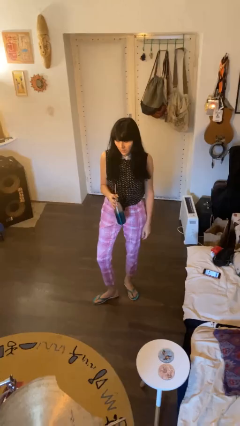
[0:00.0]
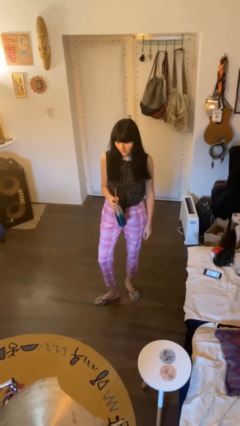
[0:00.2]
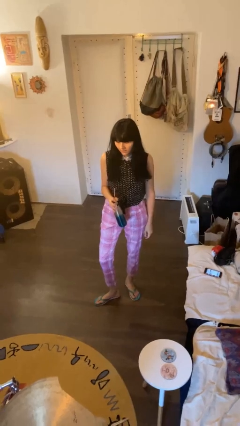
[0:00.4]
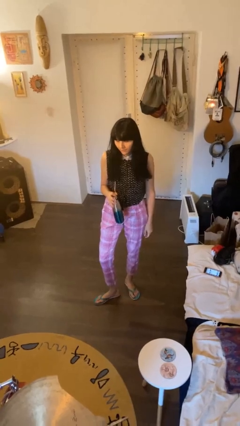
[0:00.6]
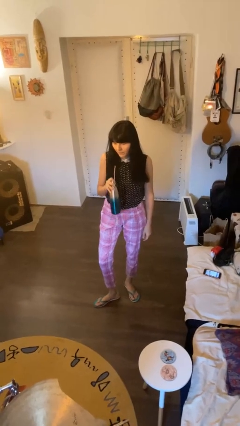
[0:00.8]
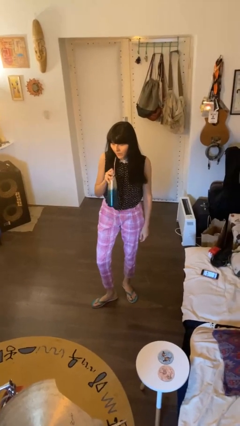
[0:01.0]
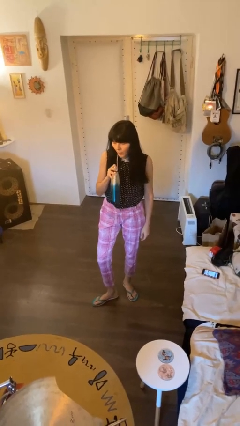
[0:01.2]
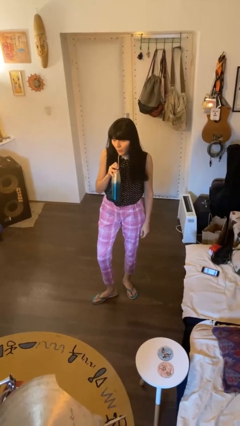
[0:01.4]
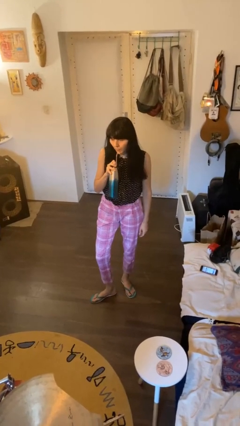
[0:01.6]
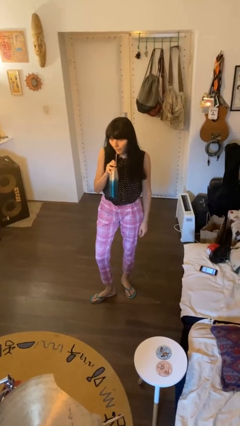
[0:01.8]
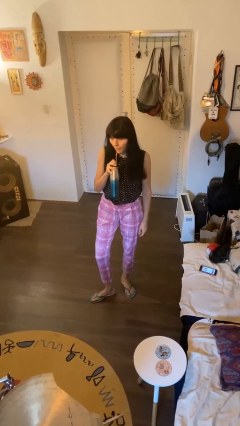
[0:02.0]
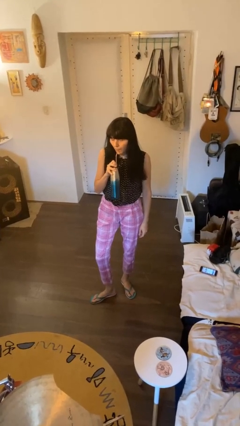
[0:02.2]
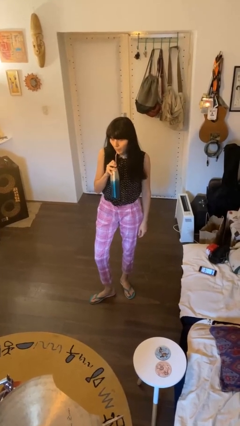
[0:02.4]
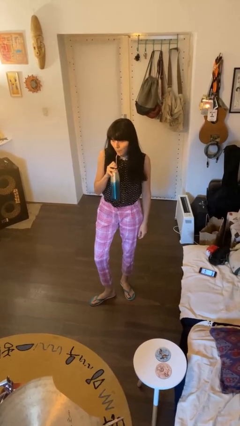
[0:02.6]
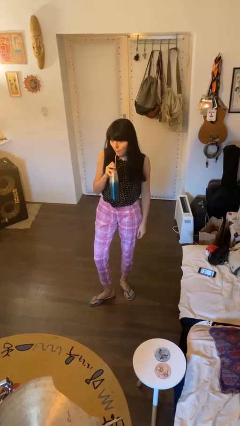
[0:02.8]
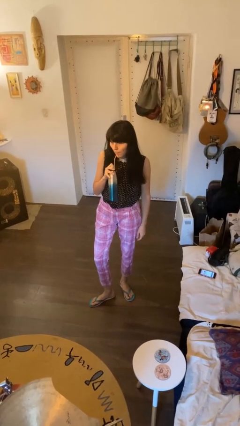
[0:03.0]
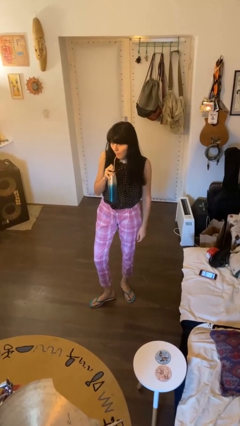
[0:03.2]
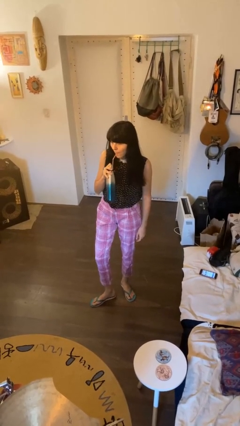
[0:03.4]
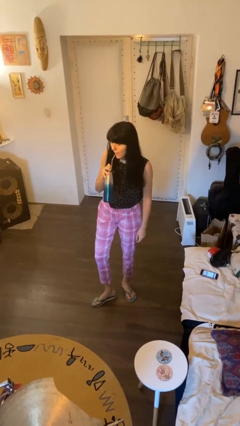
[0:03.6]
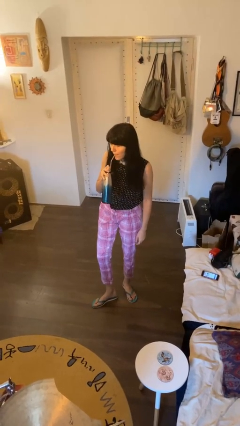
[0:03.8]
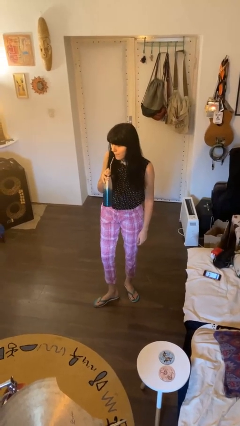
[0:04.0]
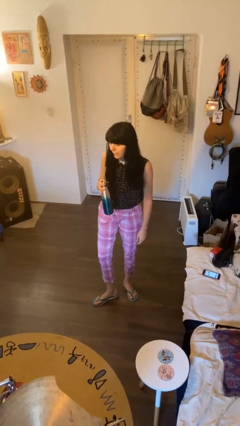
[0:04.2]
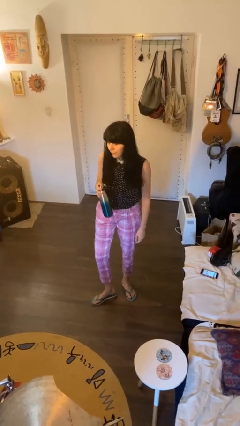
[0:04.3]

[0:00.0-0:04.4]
person drinks from straw

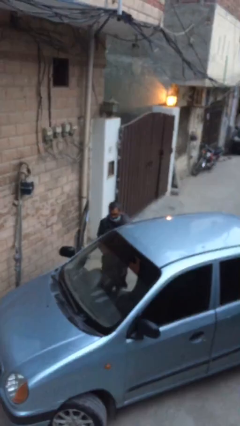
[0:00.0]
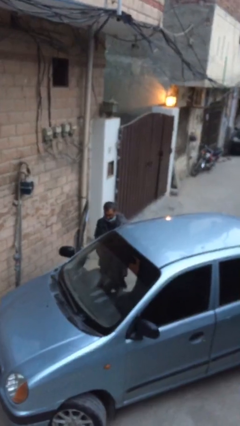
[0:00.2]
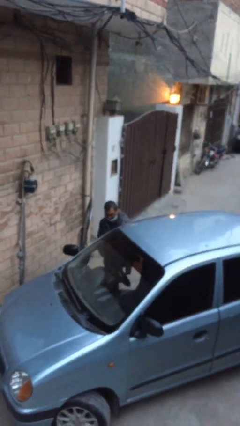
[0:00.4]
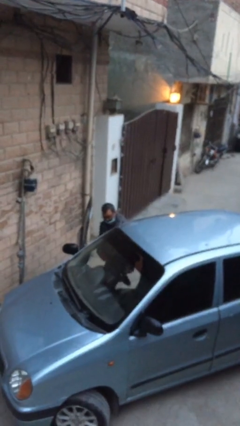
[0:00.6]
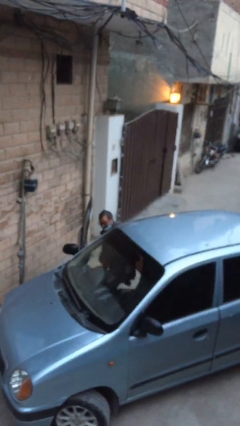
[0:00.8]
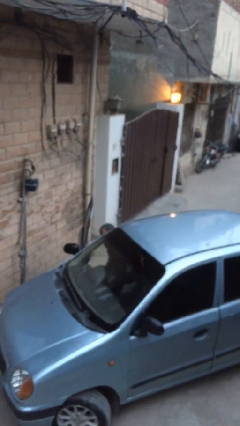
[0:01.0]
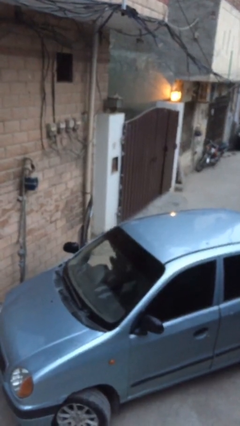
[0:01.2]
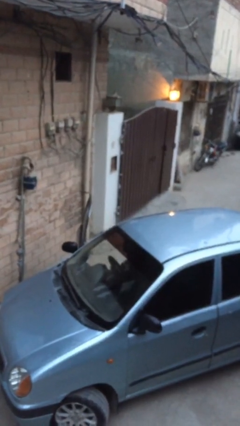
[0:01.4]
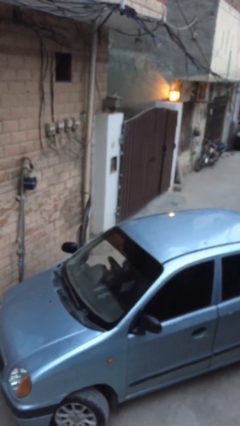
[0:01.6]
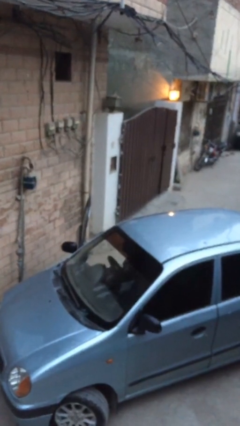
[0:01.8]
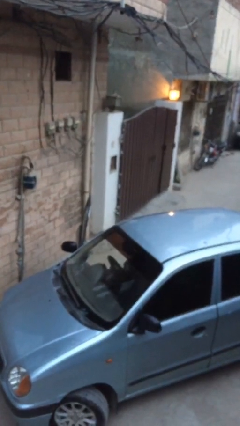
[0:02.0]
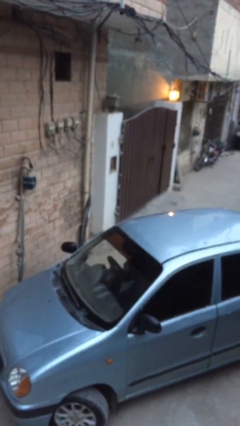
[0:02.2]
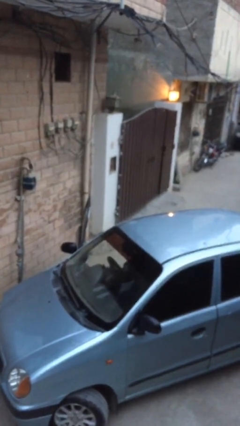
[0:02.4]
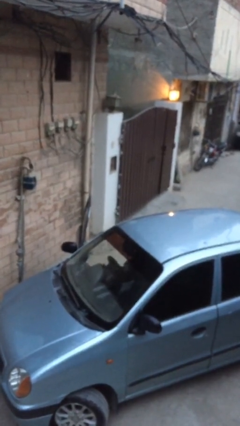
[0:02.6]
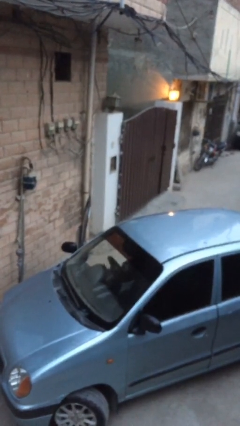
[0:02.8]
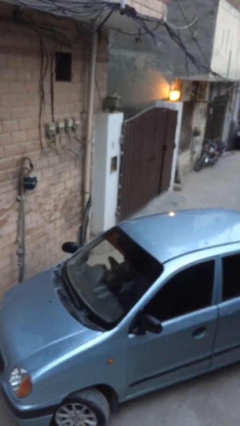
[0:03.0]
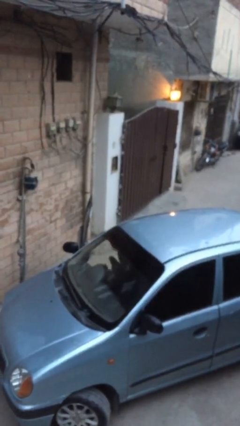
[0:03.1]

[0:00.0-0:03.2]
person enters car

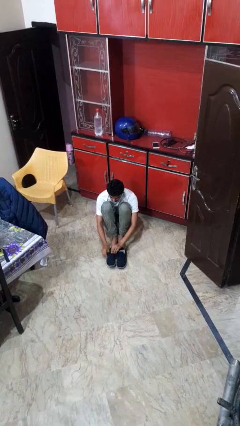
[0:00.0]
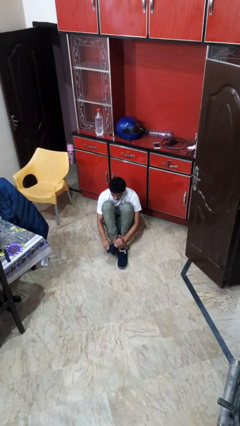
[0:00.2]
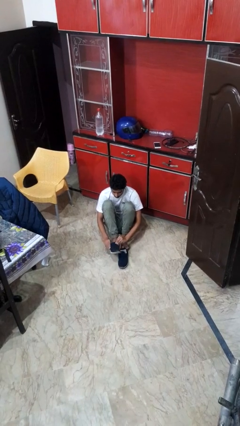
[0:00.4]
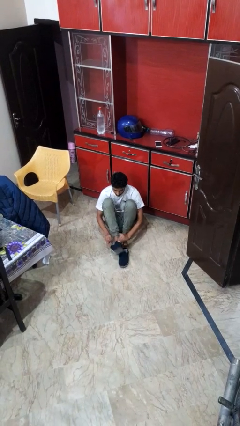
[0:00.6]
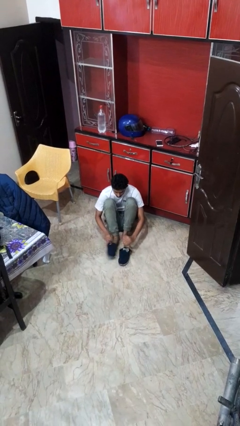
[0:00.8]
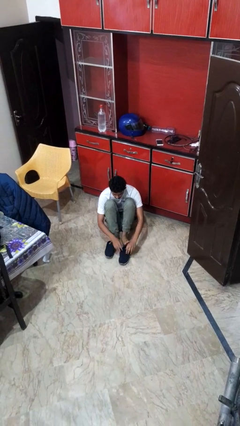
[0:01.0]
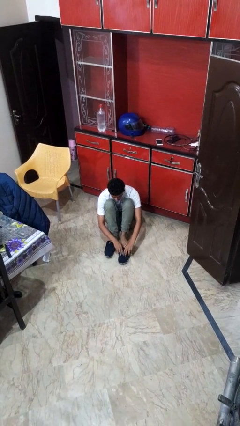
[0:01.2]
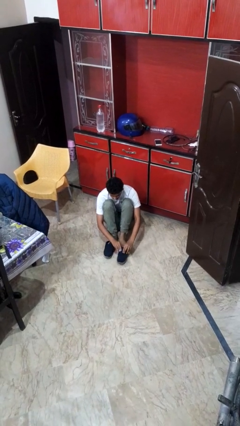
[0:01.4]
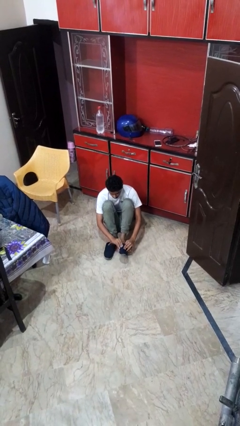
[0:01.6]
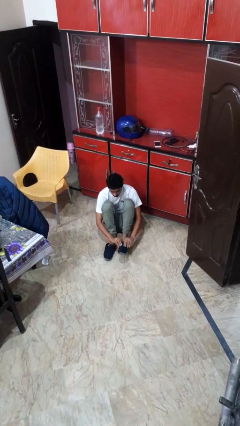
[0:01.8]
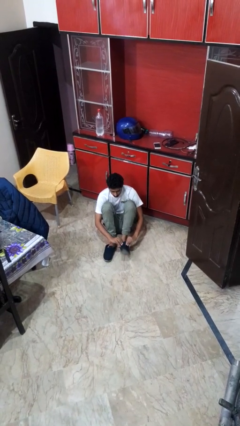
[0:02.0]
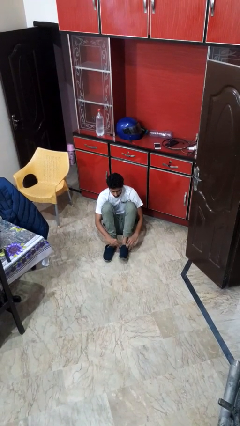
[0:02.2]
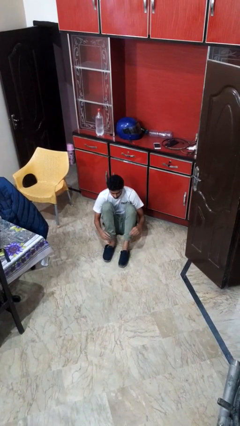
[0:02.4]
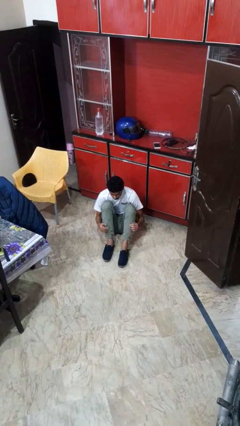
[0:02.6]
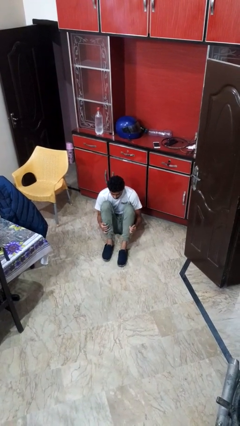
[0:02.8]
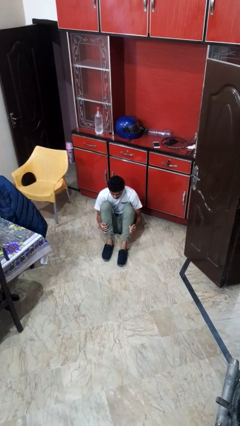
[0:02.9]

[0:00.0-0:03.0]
person puts on shoes

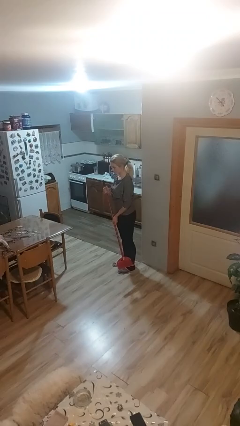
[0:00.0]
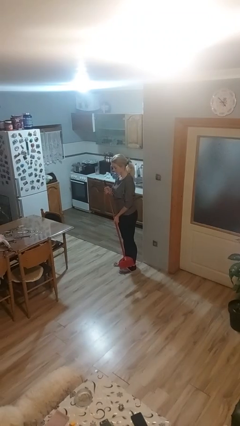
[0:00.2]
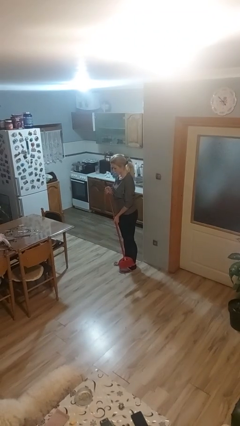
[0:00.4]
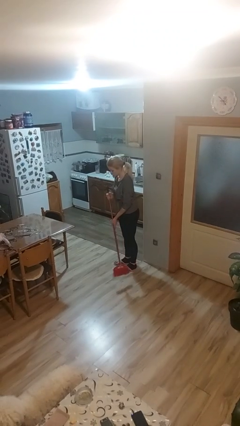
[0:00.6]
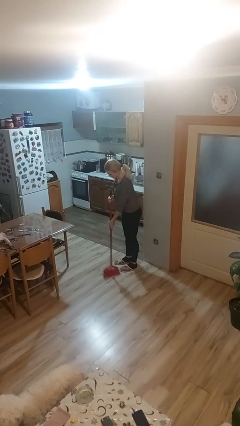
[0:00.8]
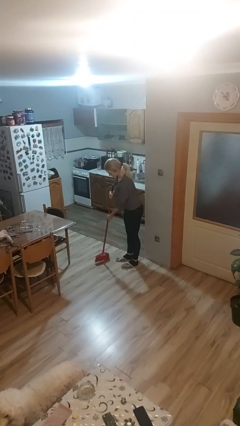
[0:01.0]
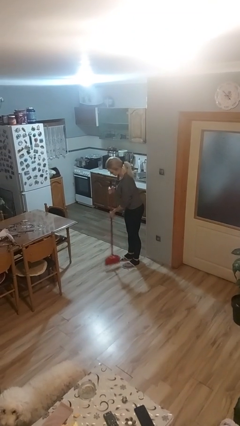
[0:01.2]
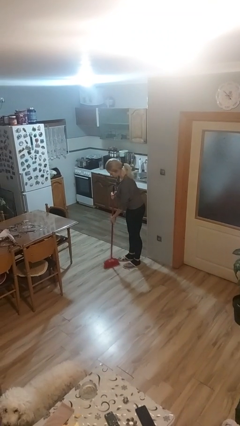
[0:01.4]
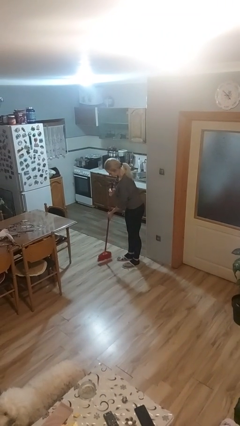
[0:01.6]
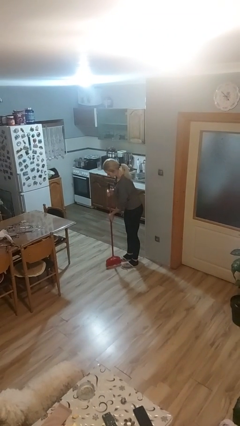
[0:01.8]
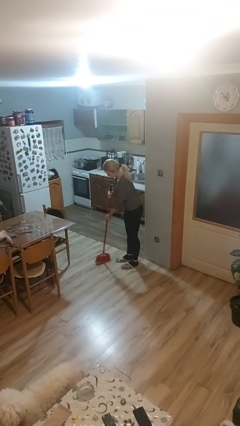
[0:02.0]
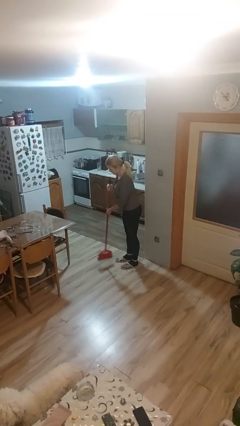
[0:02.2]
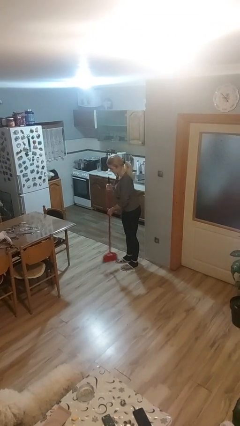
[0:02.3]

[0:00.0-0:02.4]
person sweeps floor

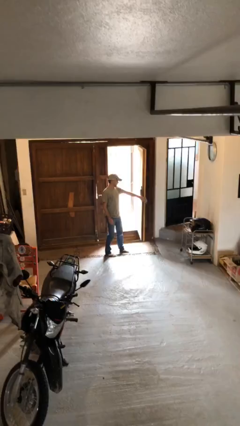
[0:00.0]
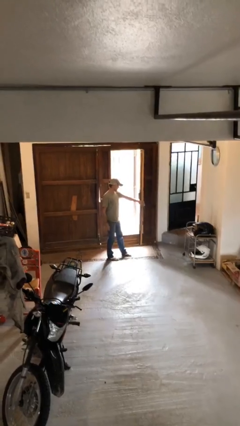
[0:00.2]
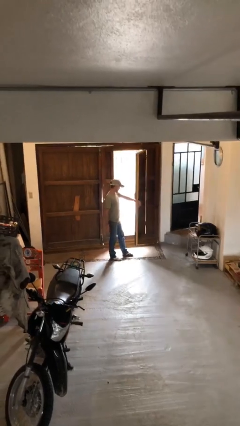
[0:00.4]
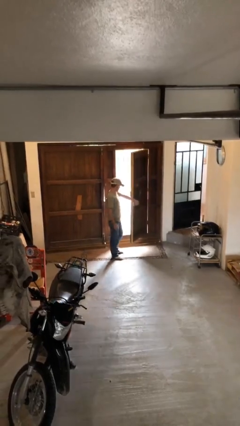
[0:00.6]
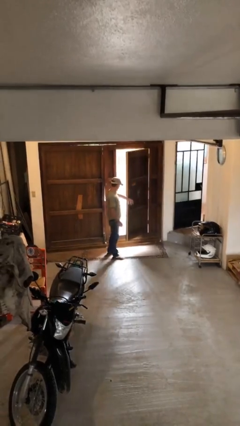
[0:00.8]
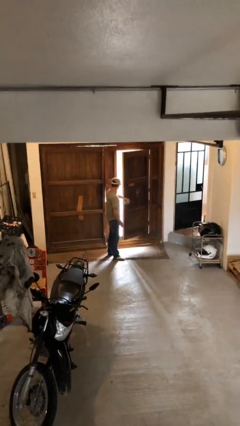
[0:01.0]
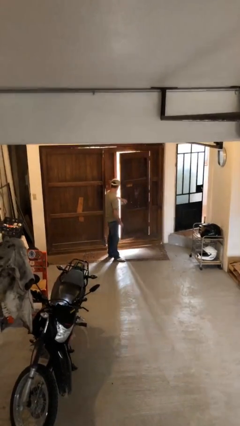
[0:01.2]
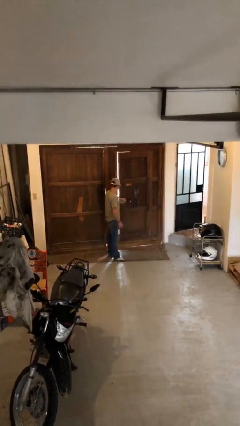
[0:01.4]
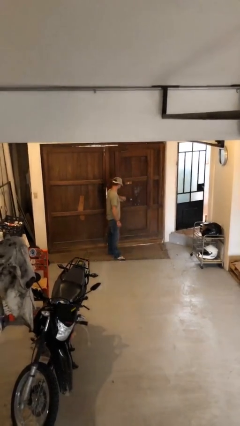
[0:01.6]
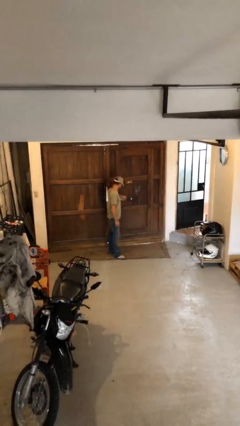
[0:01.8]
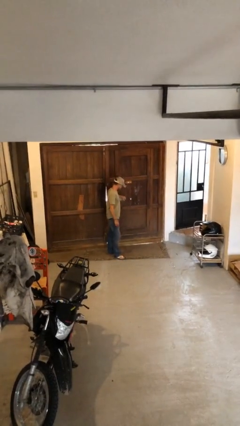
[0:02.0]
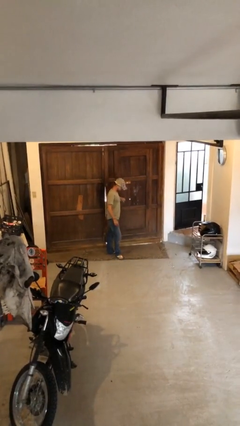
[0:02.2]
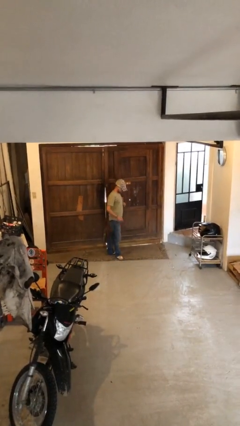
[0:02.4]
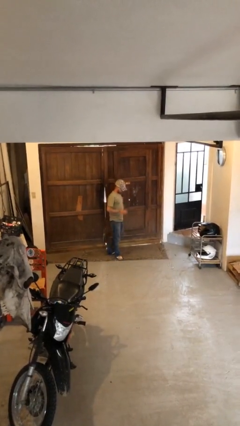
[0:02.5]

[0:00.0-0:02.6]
person closes facility door

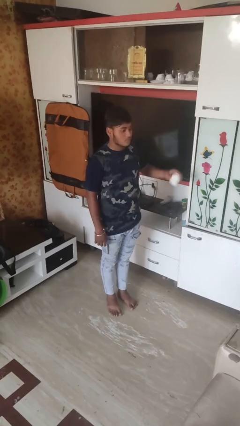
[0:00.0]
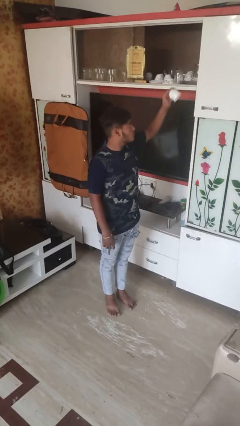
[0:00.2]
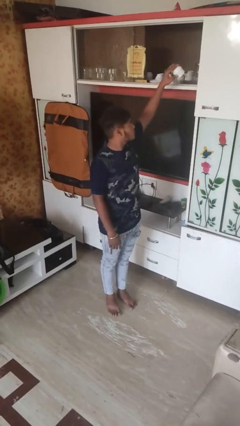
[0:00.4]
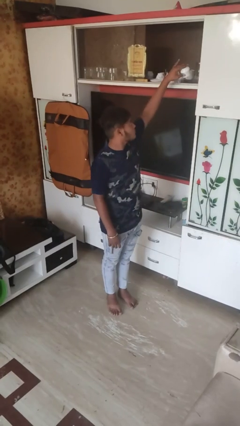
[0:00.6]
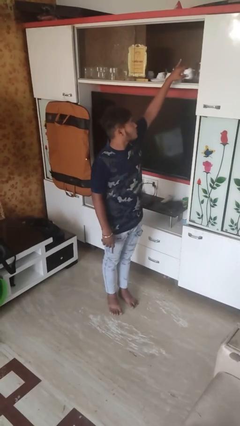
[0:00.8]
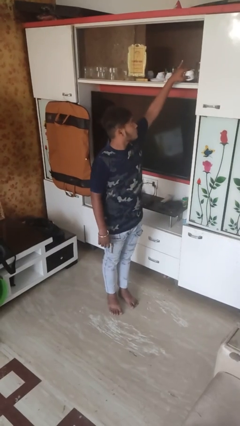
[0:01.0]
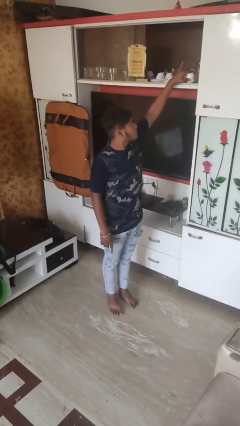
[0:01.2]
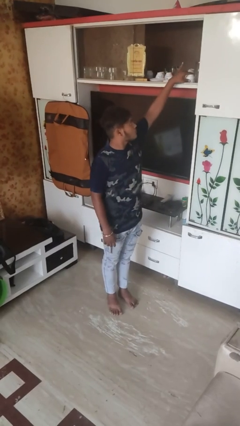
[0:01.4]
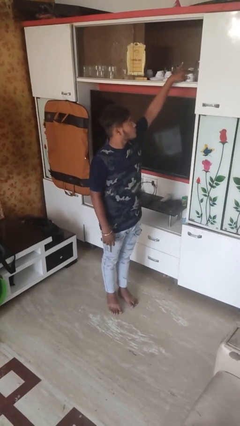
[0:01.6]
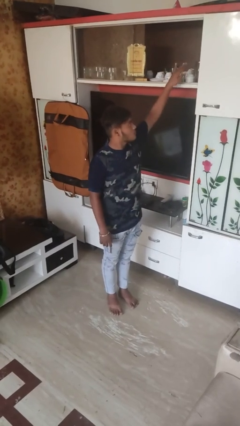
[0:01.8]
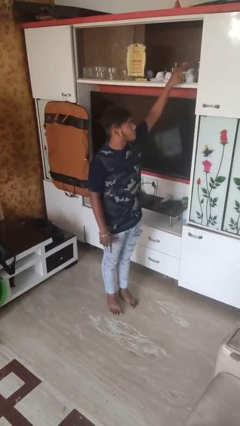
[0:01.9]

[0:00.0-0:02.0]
person puts object in cabinet
